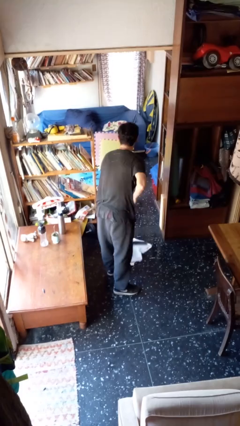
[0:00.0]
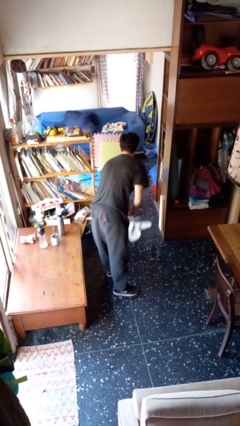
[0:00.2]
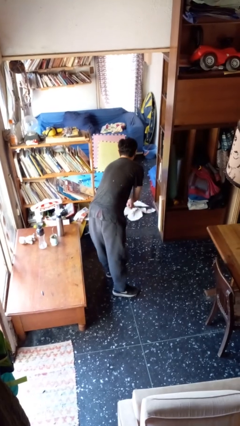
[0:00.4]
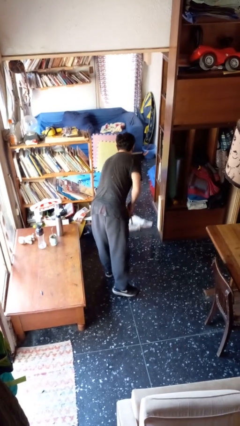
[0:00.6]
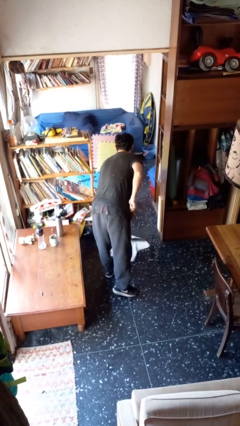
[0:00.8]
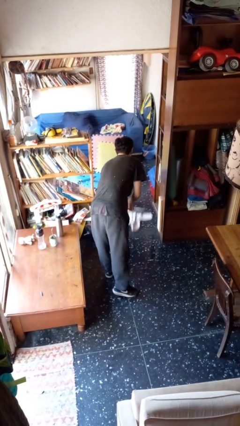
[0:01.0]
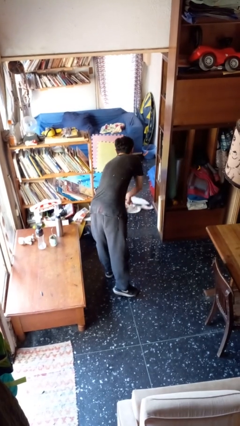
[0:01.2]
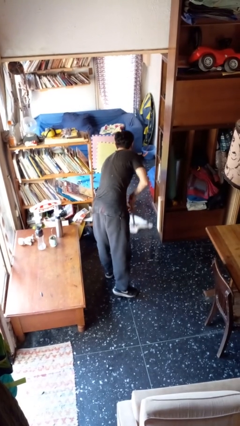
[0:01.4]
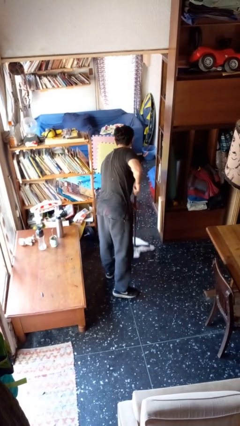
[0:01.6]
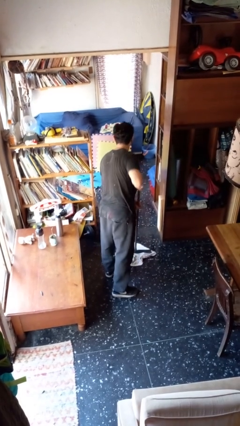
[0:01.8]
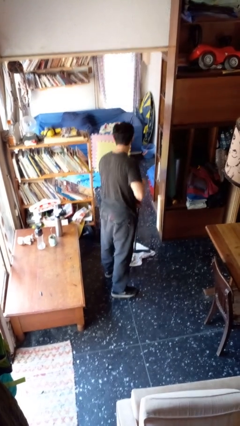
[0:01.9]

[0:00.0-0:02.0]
person mops

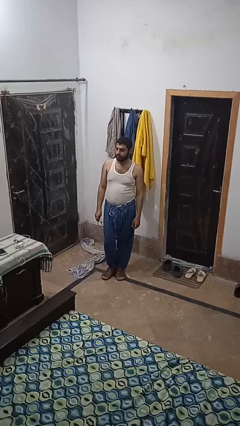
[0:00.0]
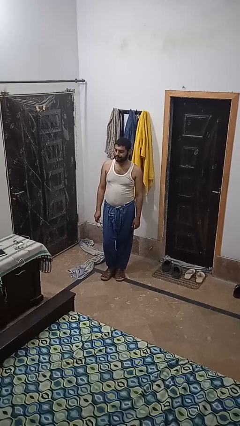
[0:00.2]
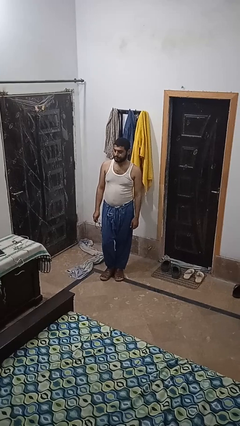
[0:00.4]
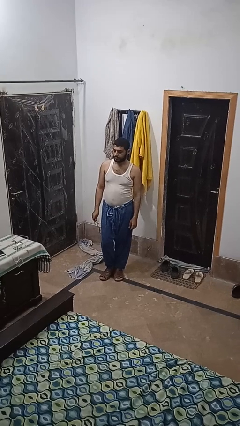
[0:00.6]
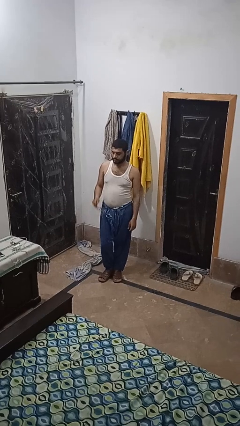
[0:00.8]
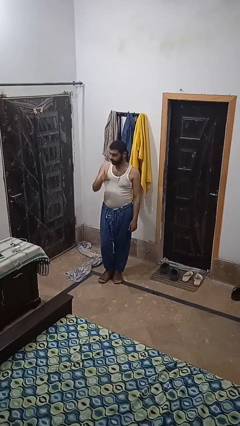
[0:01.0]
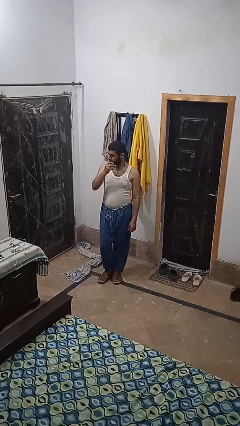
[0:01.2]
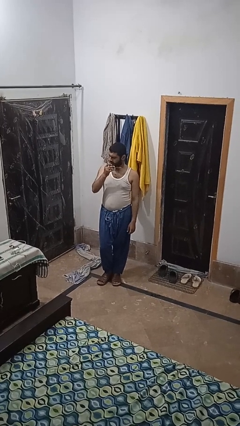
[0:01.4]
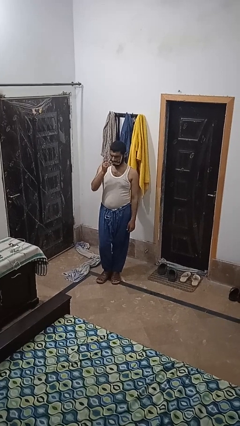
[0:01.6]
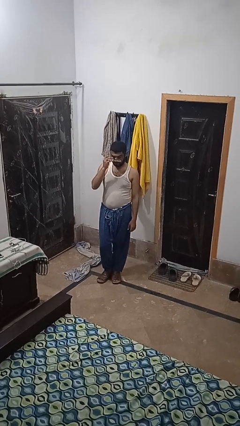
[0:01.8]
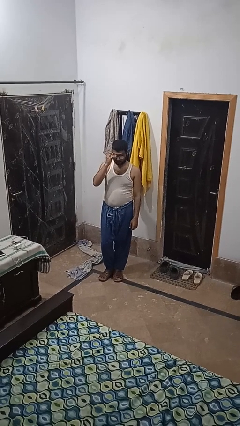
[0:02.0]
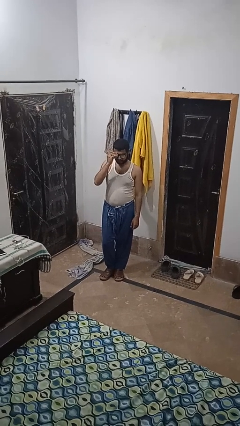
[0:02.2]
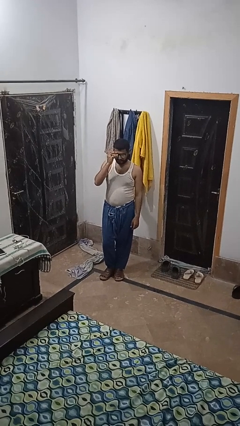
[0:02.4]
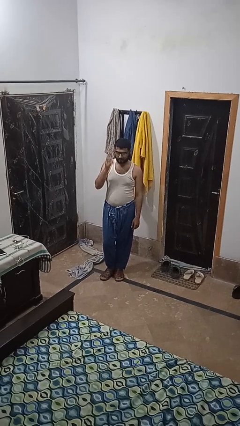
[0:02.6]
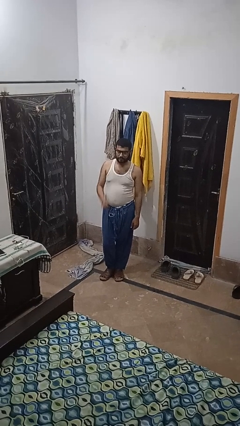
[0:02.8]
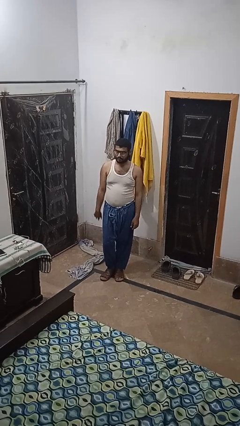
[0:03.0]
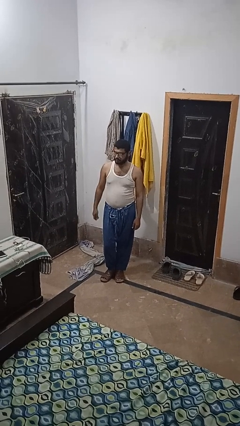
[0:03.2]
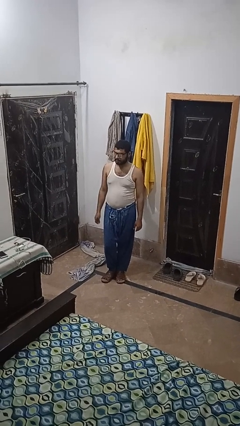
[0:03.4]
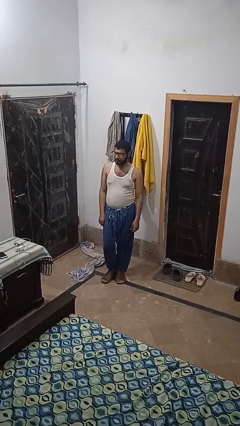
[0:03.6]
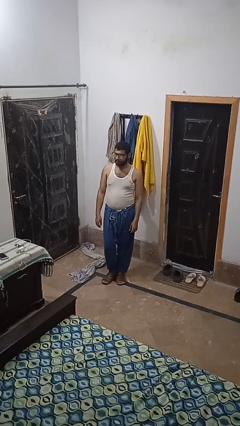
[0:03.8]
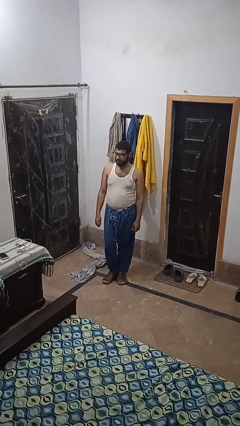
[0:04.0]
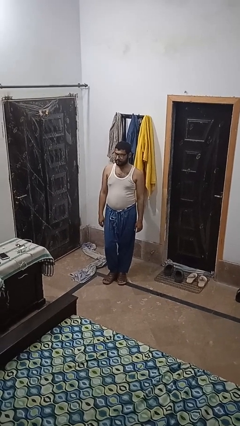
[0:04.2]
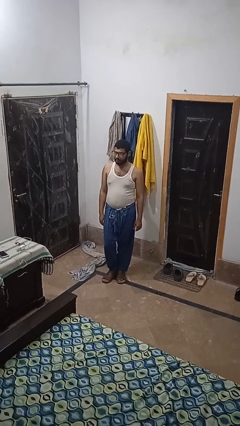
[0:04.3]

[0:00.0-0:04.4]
person puts on glasses

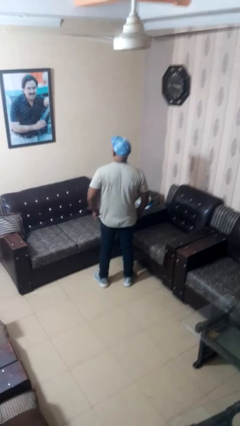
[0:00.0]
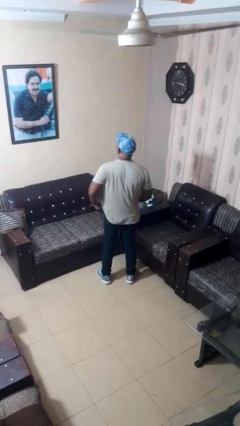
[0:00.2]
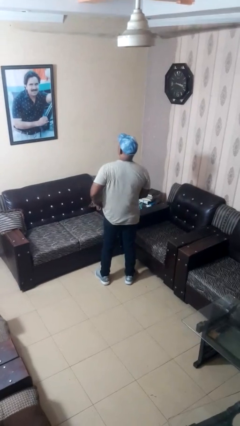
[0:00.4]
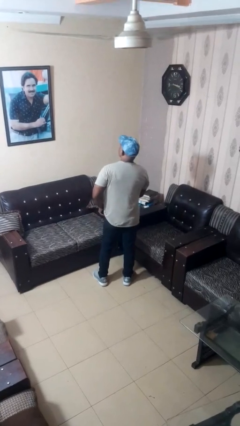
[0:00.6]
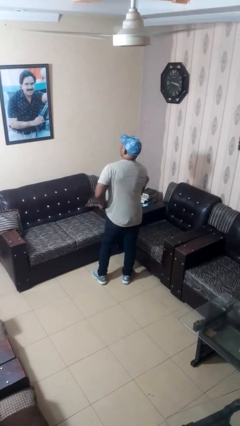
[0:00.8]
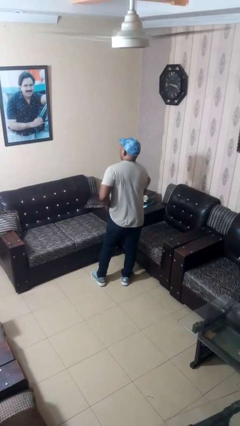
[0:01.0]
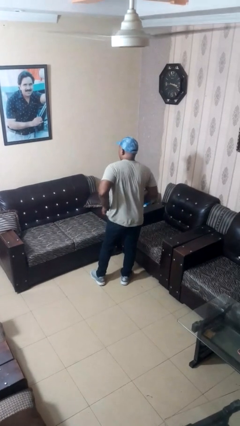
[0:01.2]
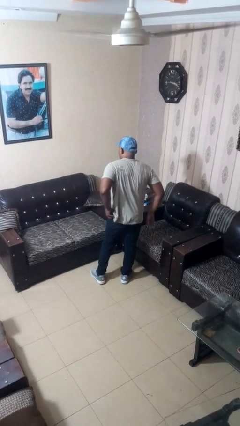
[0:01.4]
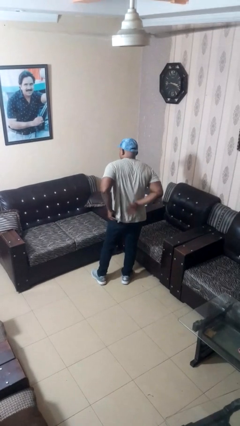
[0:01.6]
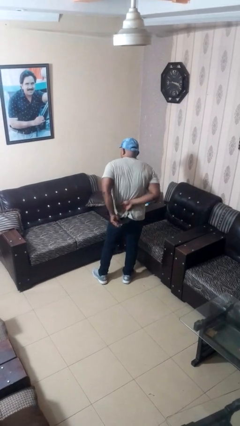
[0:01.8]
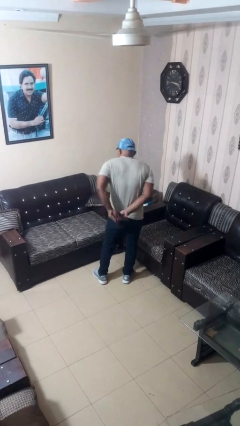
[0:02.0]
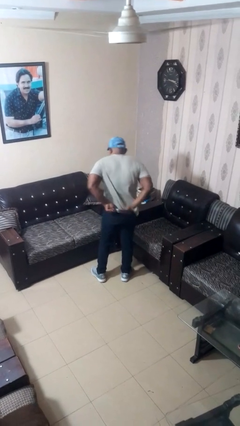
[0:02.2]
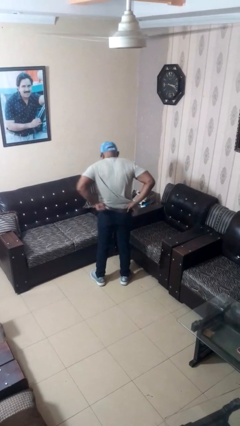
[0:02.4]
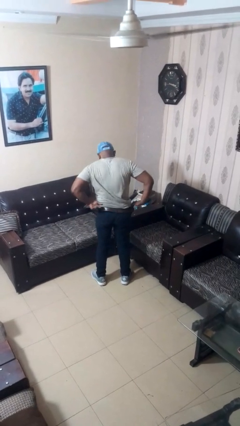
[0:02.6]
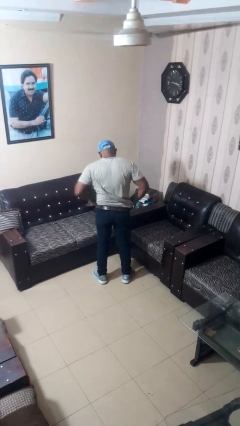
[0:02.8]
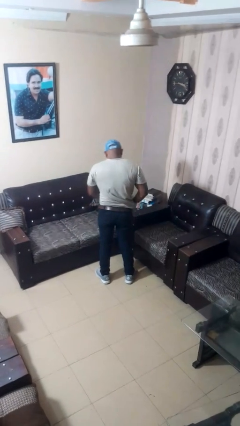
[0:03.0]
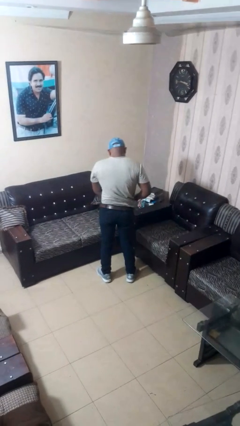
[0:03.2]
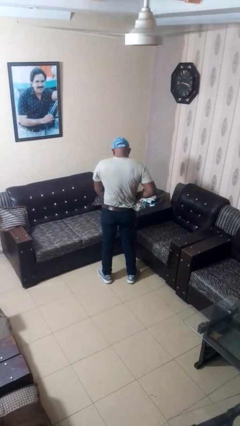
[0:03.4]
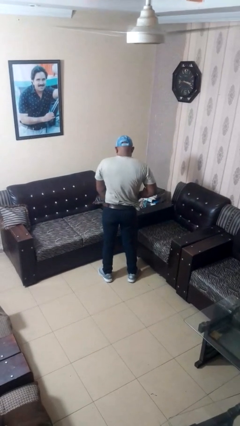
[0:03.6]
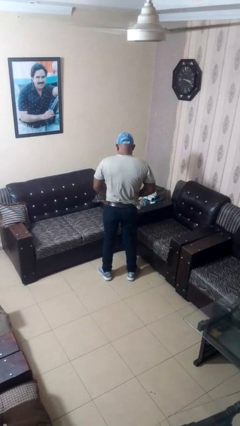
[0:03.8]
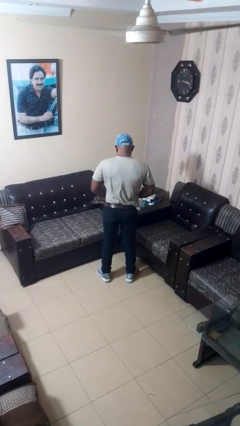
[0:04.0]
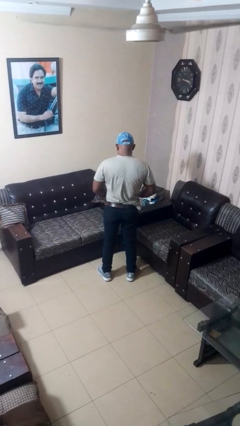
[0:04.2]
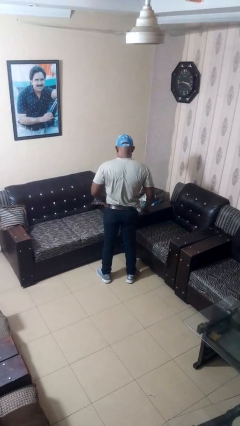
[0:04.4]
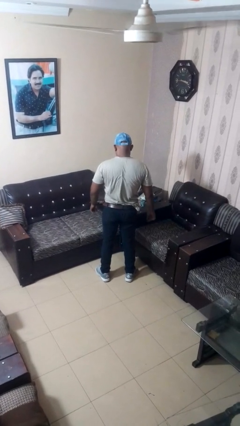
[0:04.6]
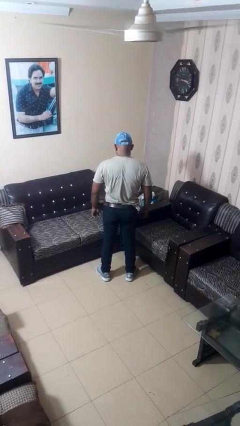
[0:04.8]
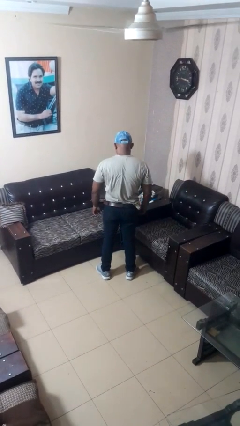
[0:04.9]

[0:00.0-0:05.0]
person tucks in shirt

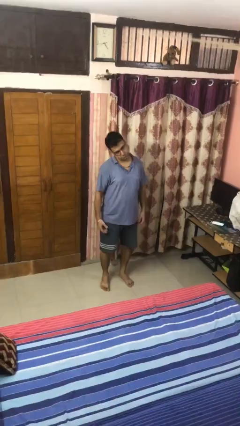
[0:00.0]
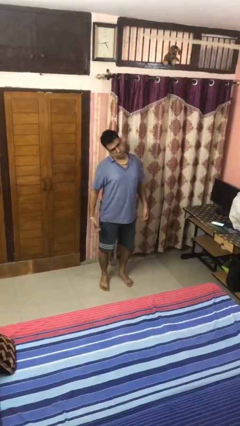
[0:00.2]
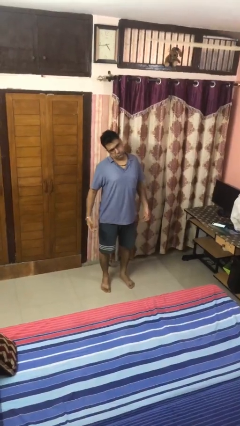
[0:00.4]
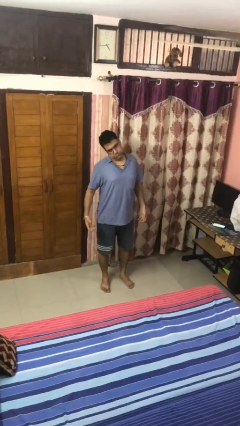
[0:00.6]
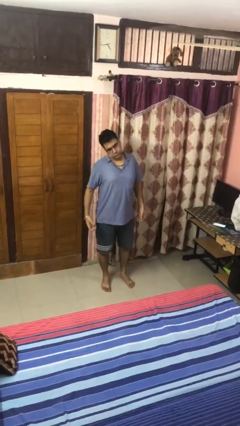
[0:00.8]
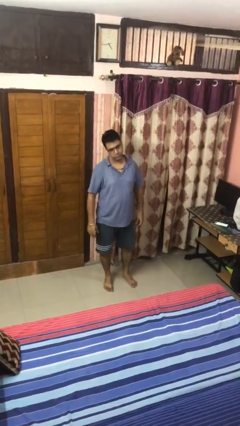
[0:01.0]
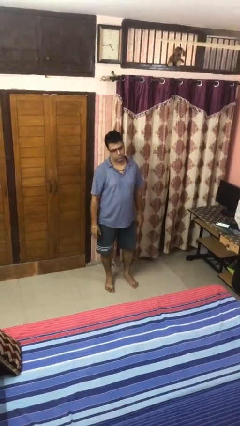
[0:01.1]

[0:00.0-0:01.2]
person shrugs

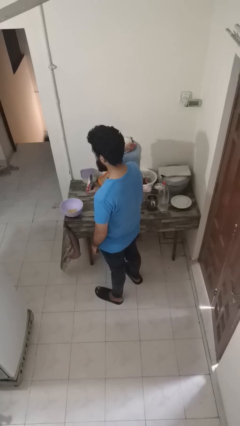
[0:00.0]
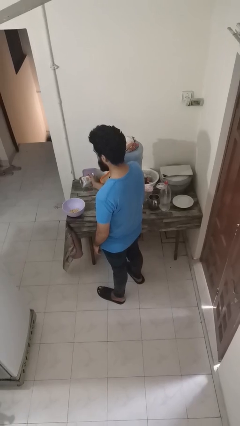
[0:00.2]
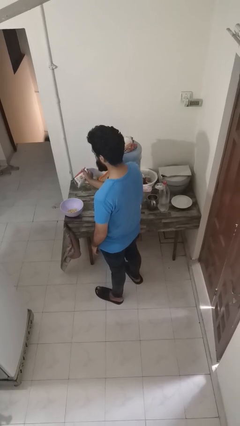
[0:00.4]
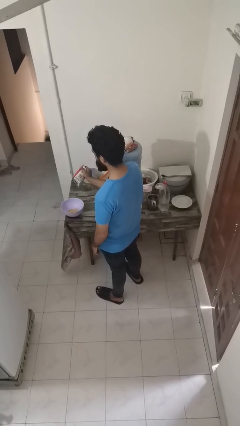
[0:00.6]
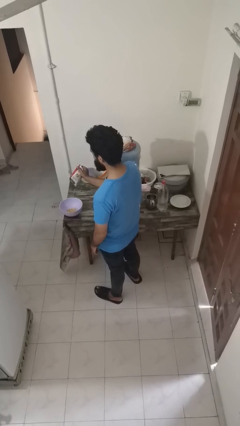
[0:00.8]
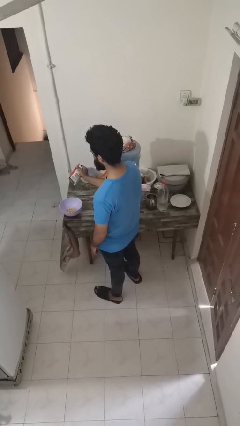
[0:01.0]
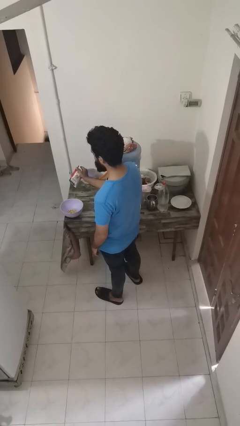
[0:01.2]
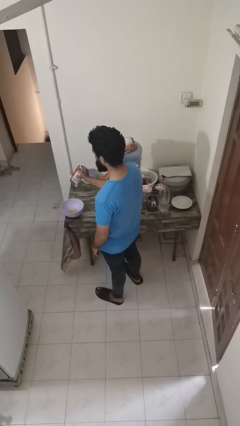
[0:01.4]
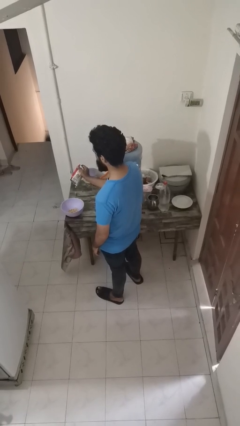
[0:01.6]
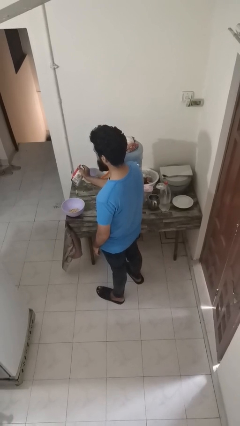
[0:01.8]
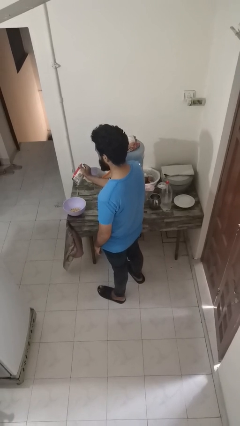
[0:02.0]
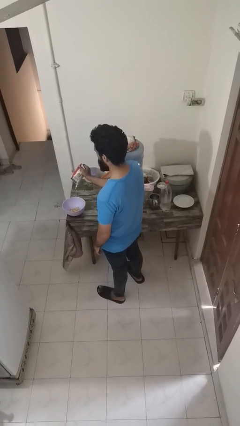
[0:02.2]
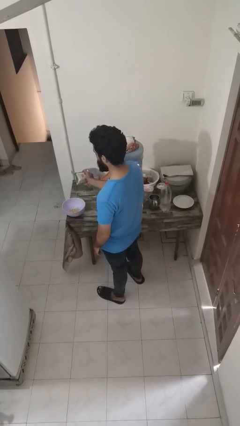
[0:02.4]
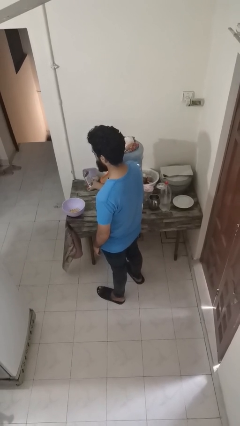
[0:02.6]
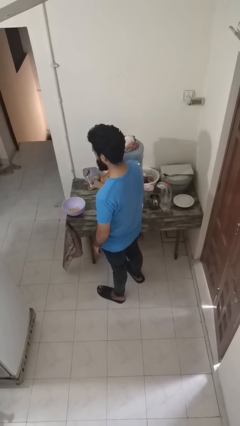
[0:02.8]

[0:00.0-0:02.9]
person pours into bowl

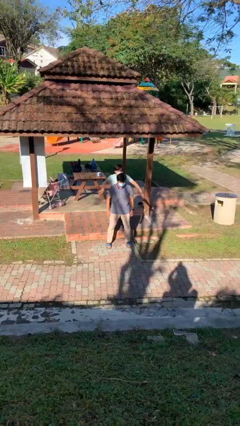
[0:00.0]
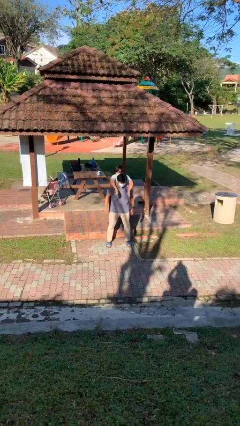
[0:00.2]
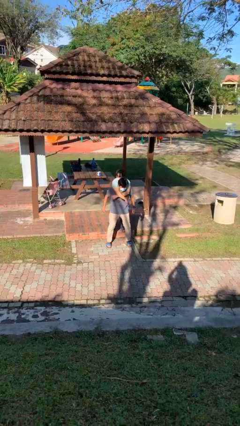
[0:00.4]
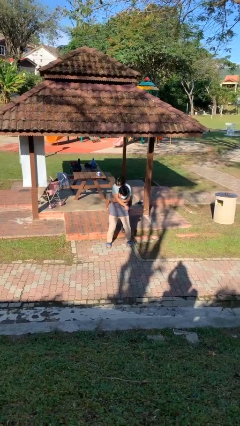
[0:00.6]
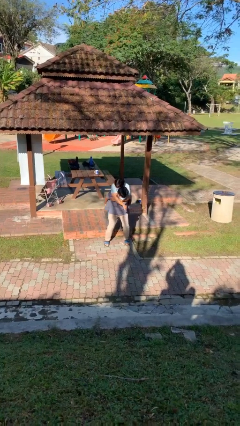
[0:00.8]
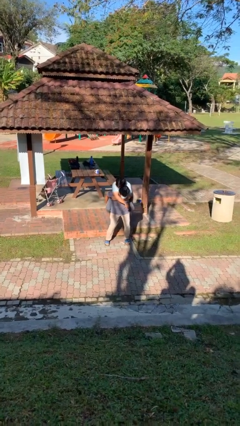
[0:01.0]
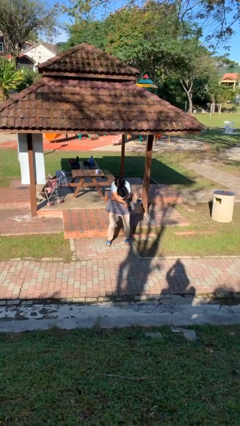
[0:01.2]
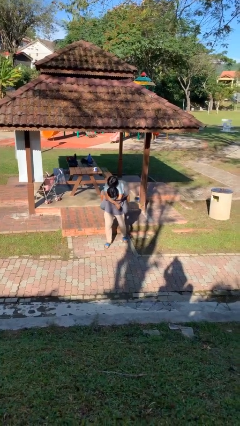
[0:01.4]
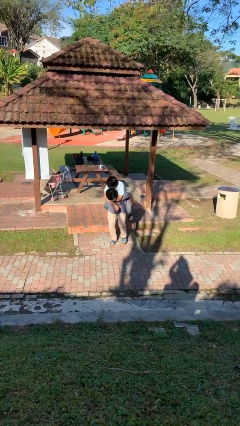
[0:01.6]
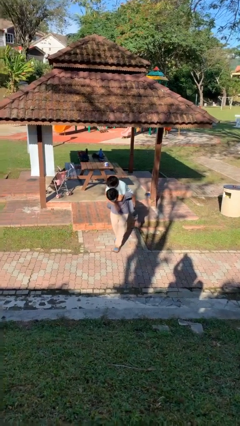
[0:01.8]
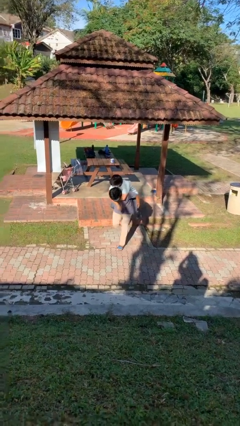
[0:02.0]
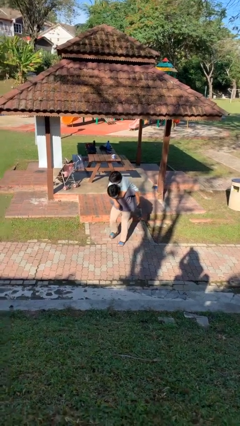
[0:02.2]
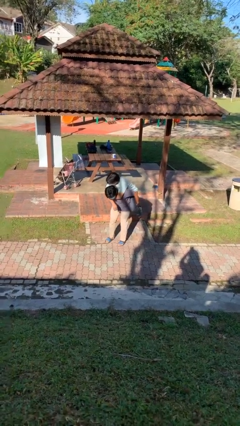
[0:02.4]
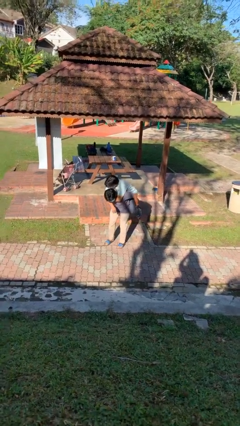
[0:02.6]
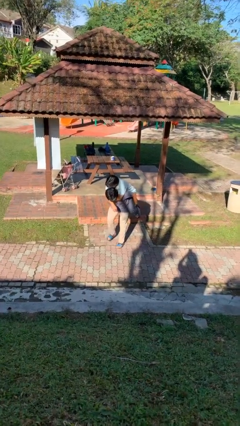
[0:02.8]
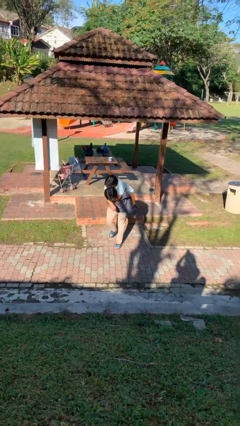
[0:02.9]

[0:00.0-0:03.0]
person carries person over shoulder
